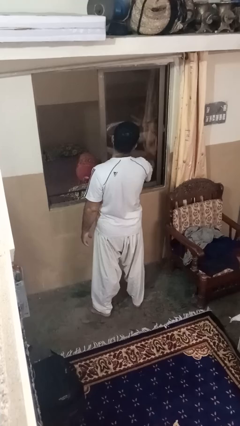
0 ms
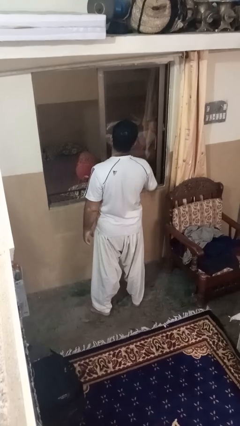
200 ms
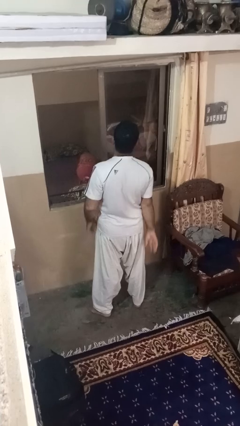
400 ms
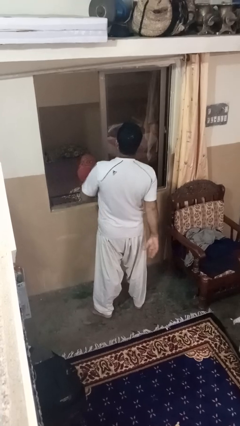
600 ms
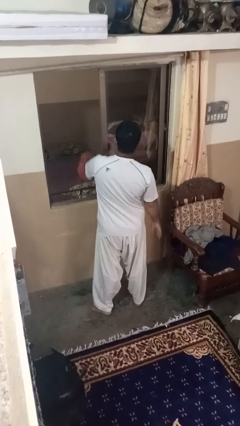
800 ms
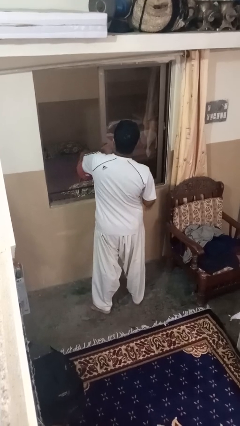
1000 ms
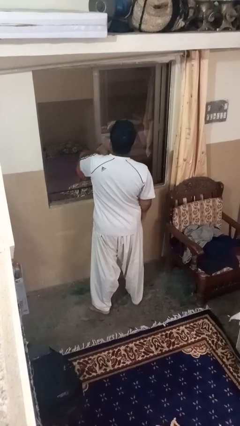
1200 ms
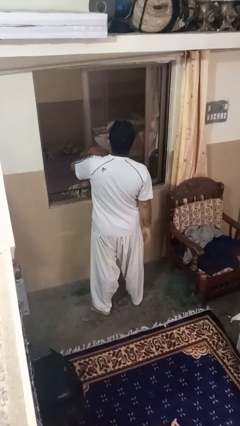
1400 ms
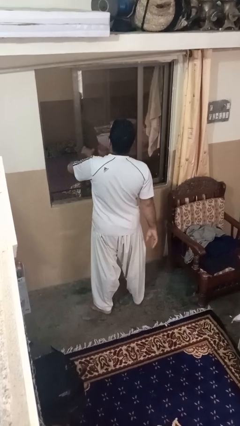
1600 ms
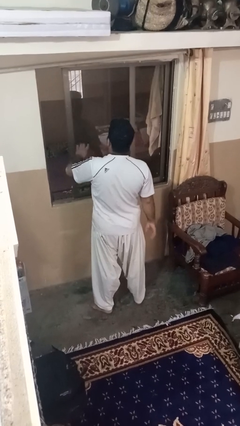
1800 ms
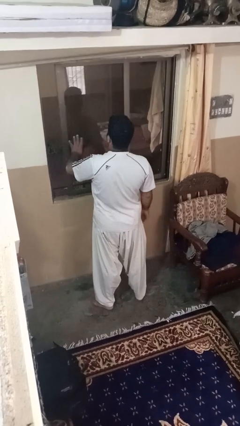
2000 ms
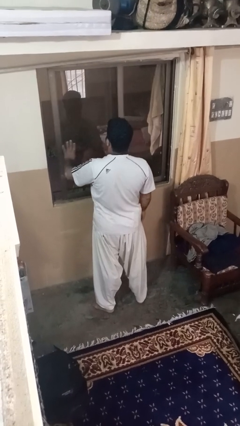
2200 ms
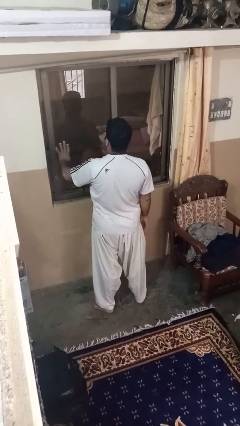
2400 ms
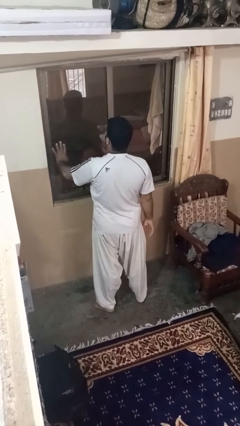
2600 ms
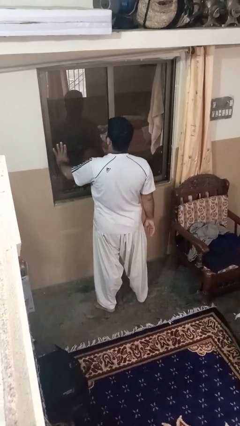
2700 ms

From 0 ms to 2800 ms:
person closes home window

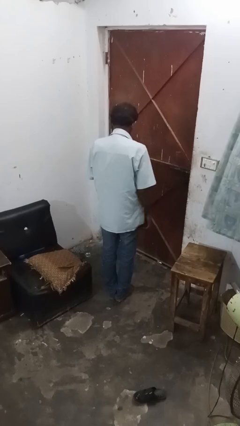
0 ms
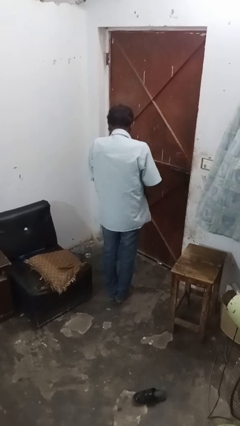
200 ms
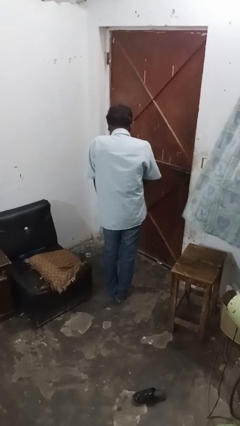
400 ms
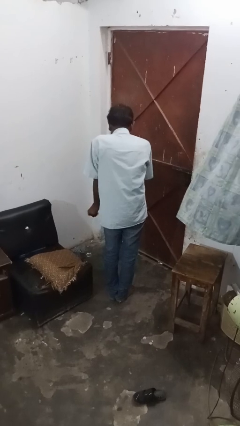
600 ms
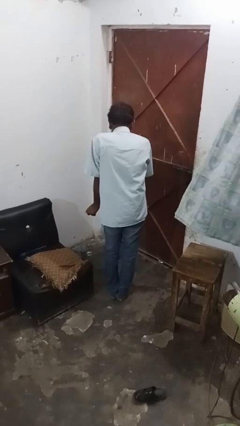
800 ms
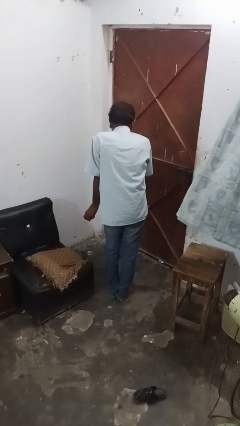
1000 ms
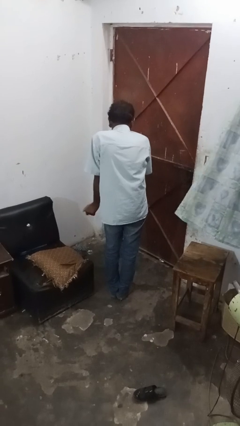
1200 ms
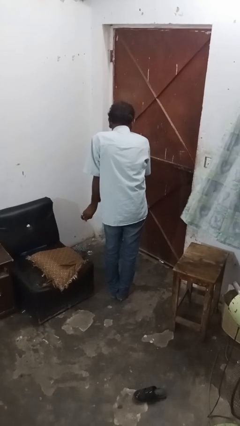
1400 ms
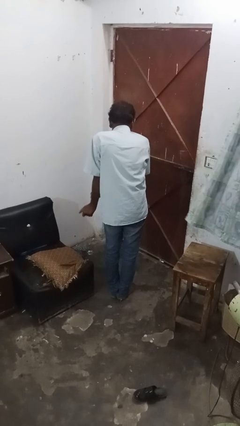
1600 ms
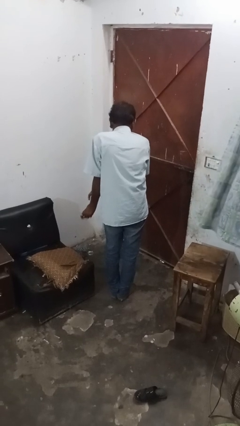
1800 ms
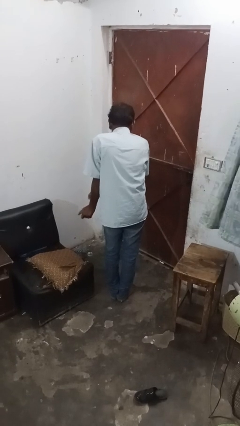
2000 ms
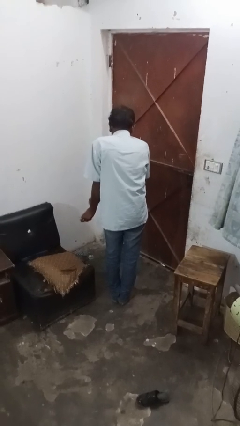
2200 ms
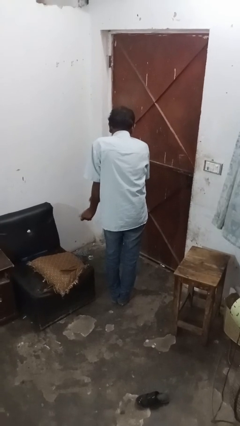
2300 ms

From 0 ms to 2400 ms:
person snaps fingers

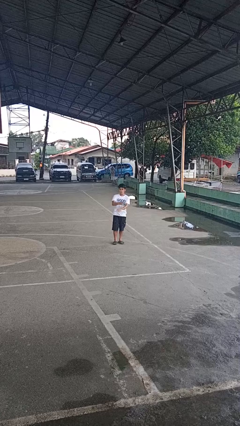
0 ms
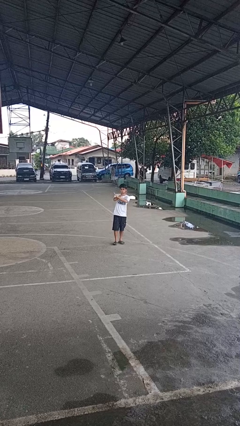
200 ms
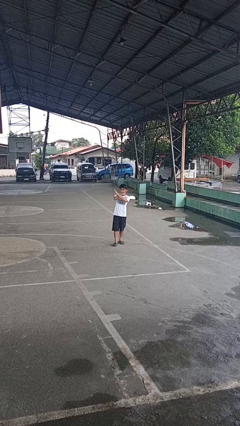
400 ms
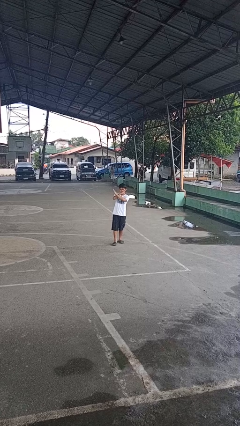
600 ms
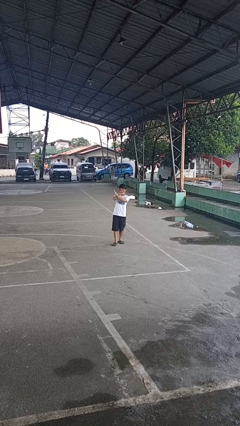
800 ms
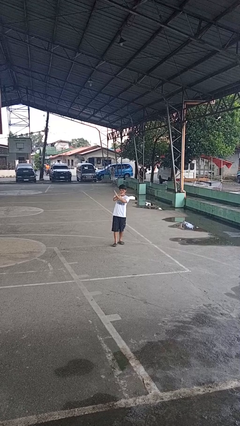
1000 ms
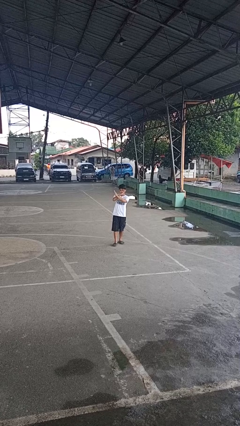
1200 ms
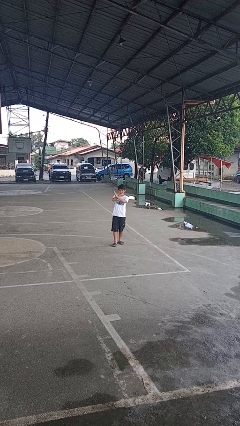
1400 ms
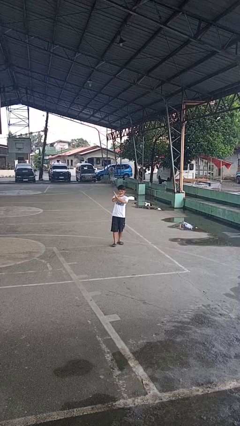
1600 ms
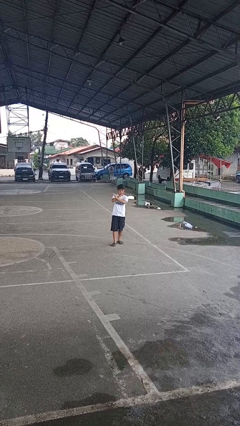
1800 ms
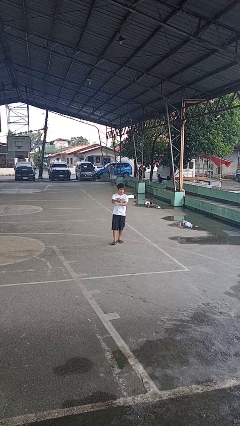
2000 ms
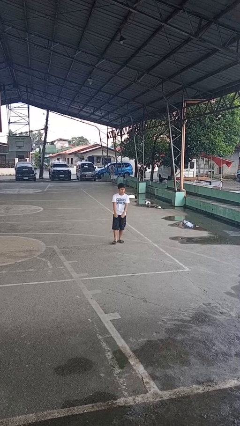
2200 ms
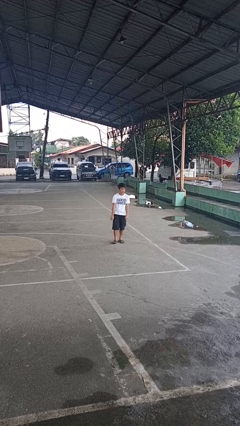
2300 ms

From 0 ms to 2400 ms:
person gestures arms x

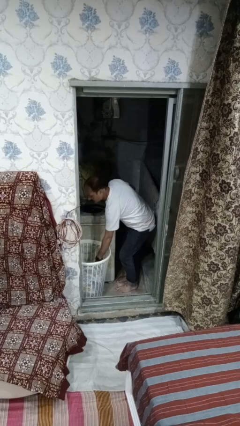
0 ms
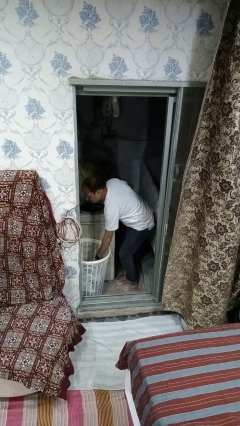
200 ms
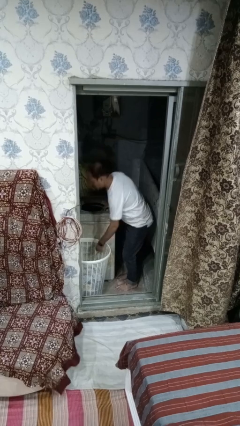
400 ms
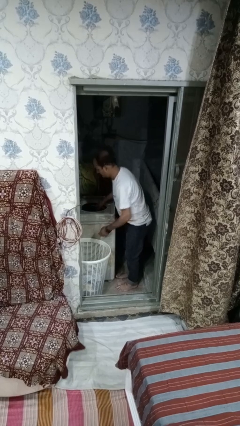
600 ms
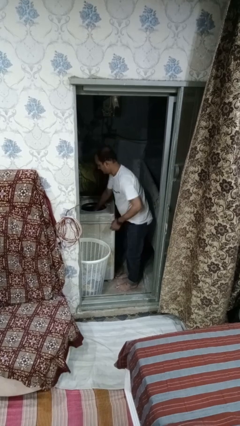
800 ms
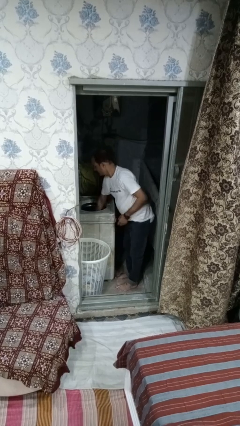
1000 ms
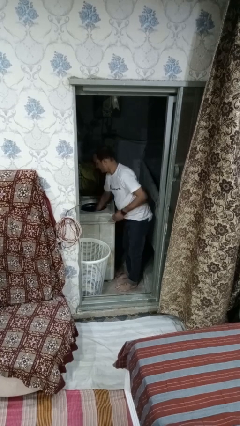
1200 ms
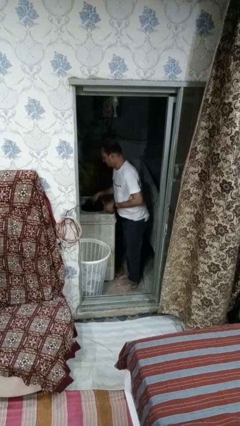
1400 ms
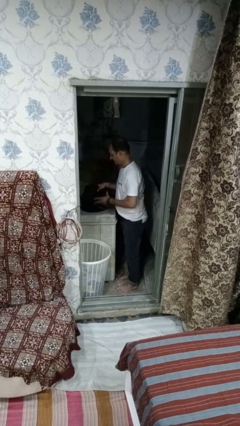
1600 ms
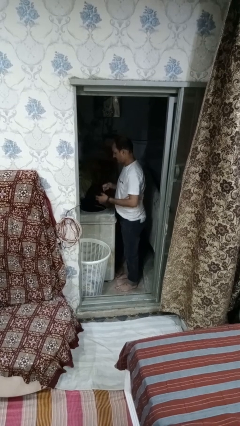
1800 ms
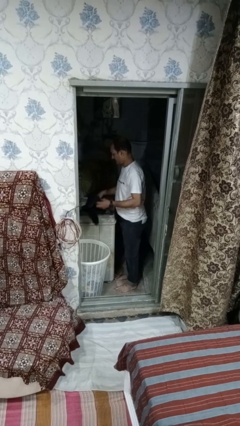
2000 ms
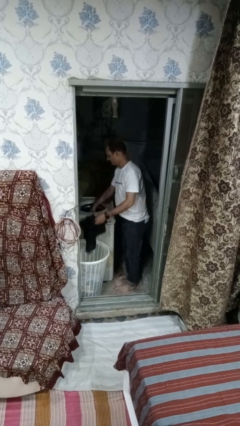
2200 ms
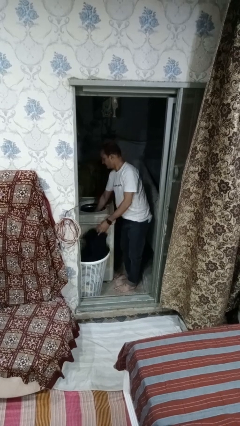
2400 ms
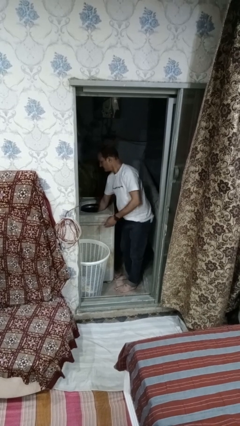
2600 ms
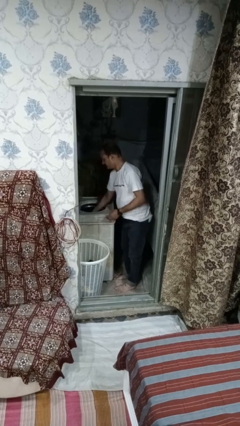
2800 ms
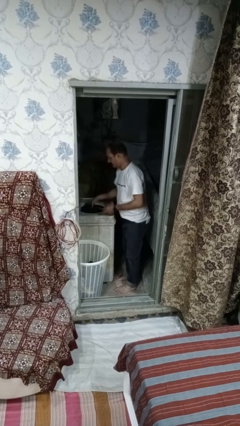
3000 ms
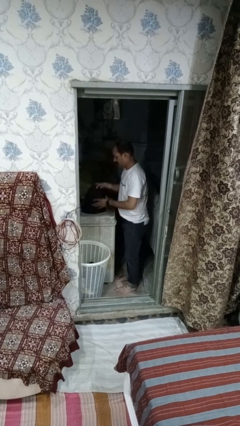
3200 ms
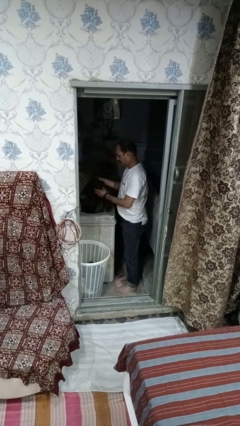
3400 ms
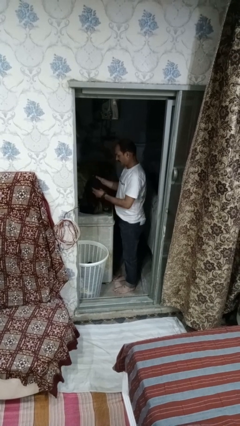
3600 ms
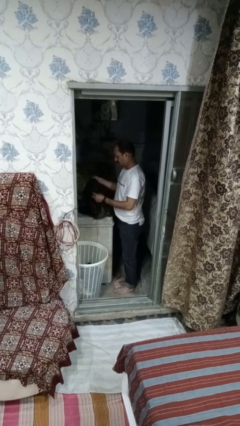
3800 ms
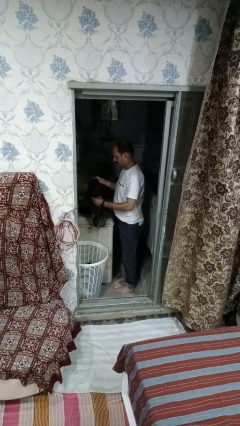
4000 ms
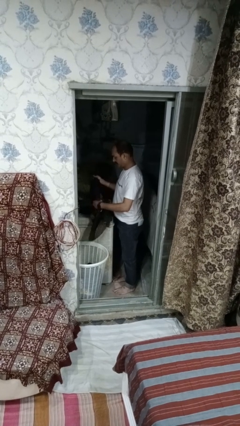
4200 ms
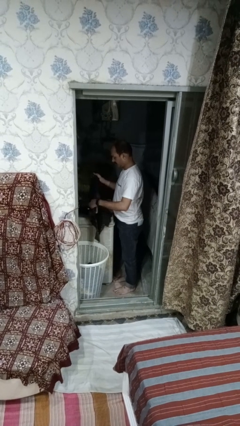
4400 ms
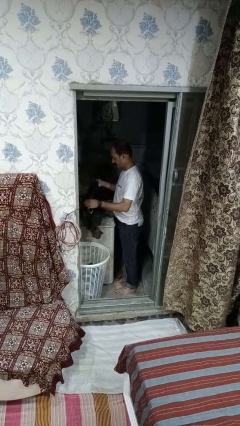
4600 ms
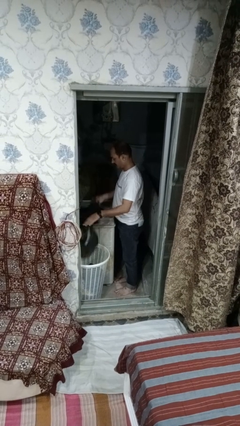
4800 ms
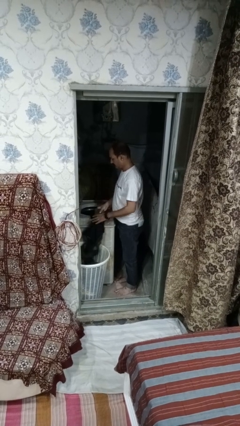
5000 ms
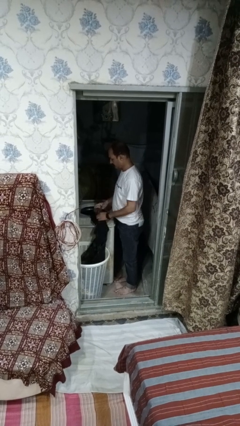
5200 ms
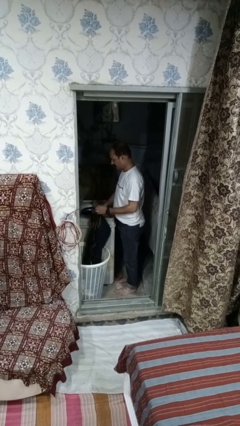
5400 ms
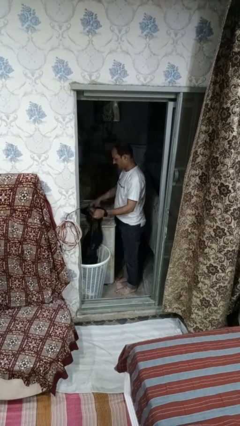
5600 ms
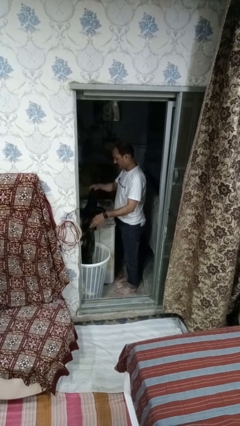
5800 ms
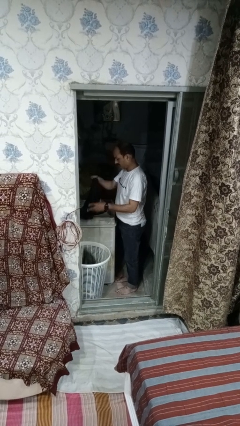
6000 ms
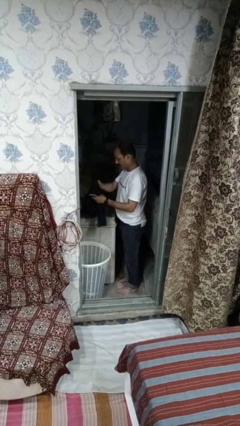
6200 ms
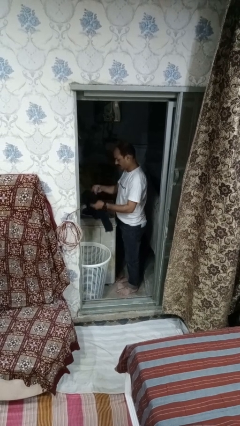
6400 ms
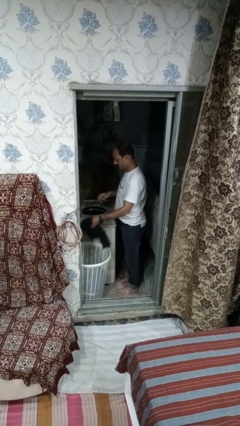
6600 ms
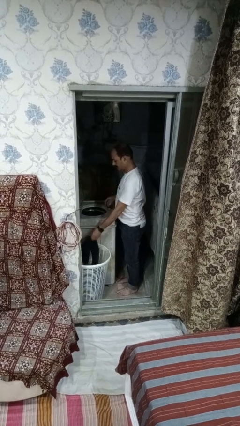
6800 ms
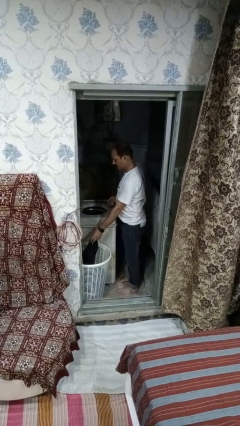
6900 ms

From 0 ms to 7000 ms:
person unloads dryer

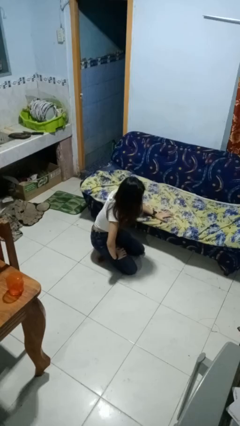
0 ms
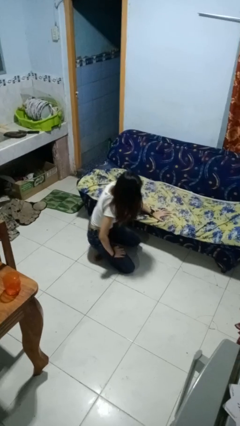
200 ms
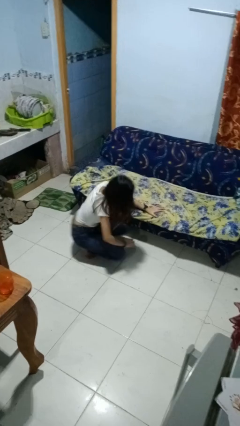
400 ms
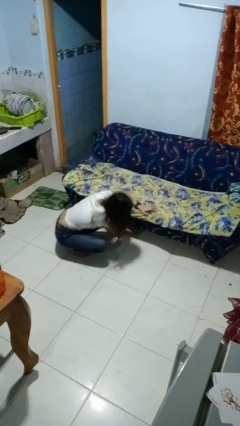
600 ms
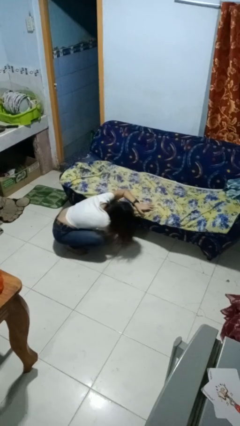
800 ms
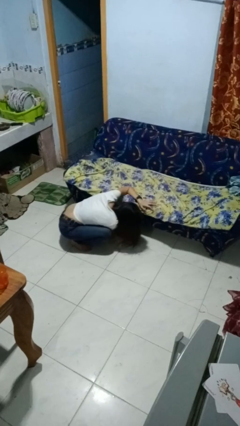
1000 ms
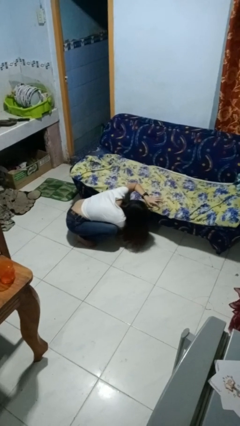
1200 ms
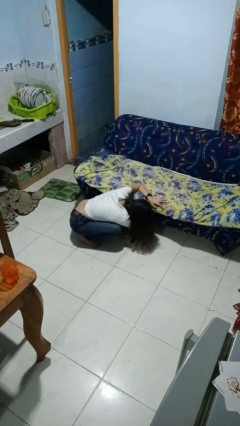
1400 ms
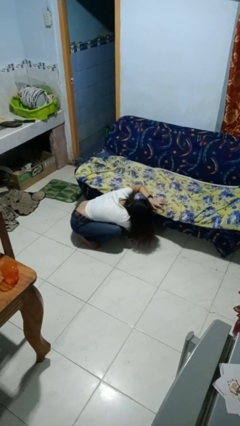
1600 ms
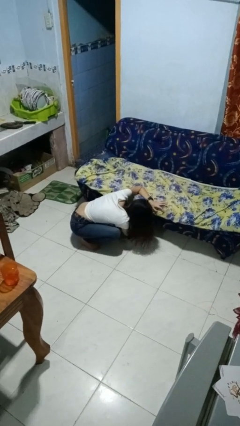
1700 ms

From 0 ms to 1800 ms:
person searches in couch

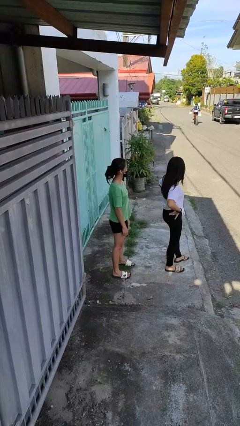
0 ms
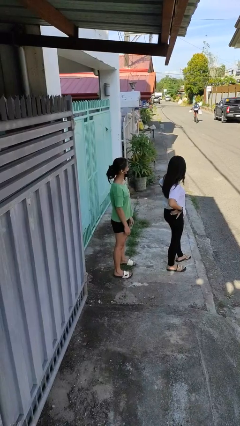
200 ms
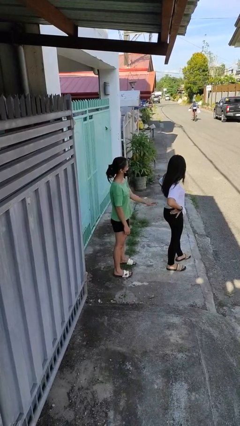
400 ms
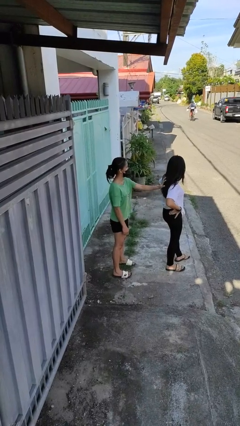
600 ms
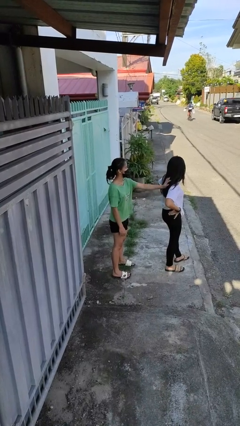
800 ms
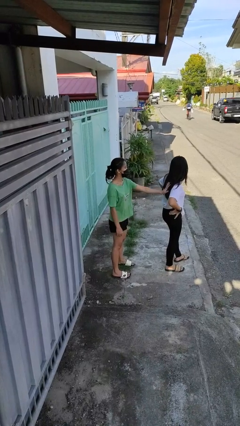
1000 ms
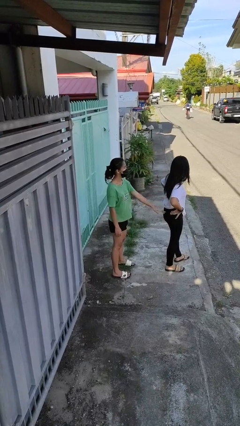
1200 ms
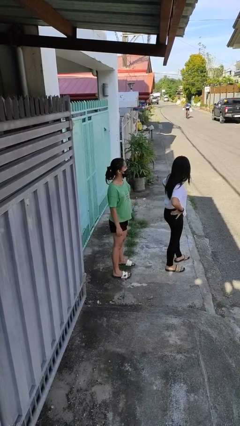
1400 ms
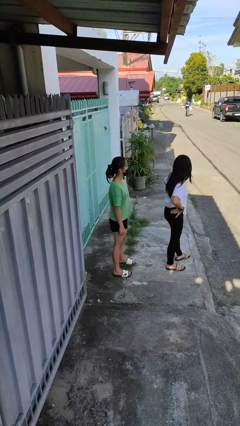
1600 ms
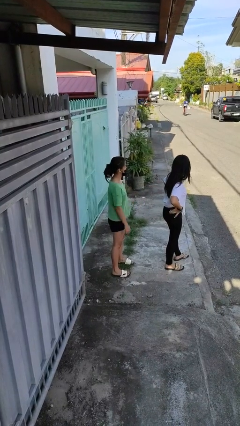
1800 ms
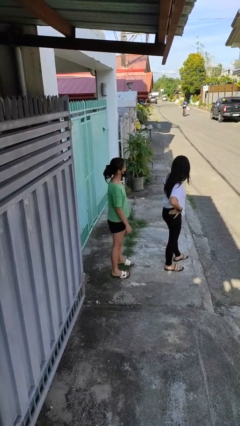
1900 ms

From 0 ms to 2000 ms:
person touches back of person
